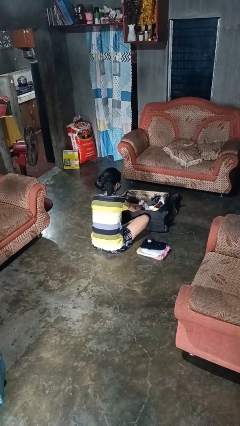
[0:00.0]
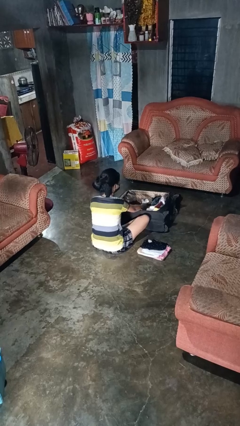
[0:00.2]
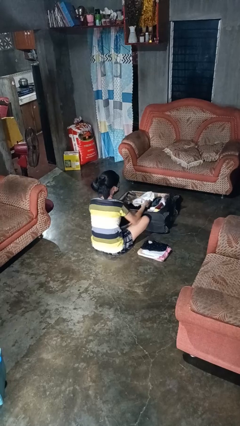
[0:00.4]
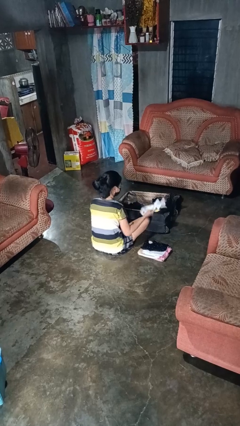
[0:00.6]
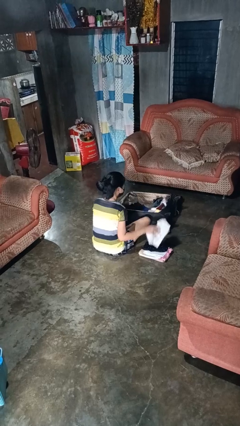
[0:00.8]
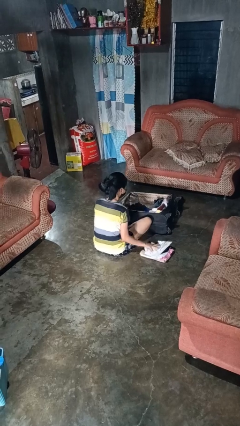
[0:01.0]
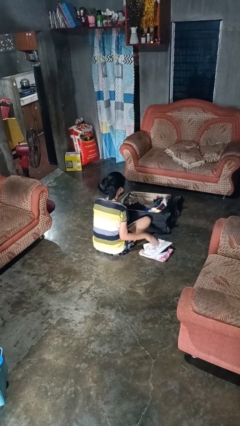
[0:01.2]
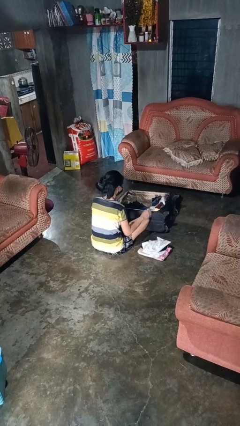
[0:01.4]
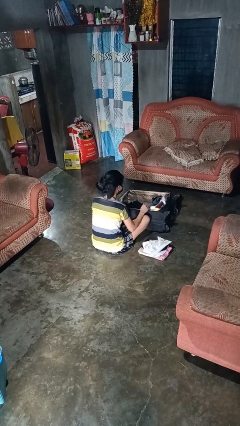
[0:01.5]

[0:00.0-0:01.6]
person unloads clothes from suitcase

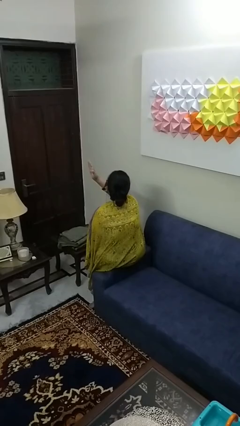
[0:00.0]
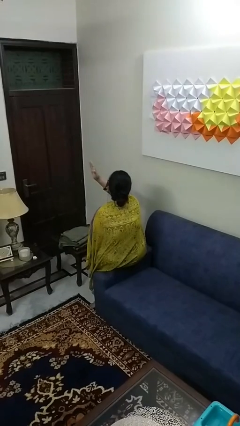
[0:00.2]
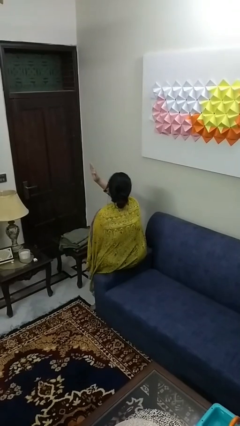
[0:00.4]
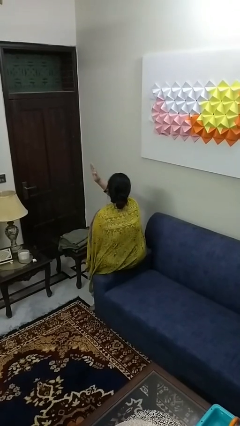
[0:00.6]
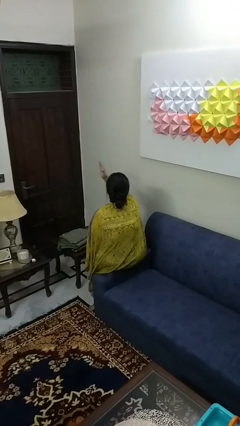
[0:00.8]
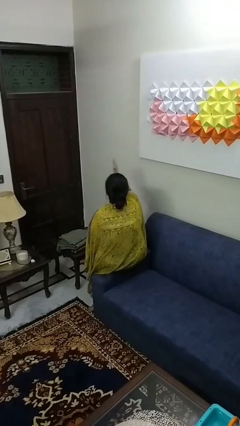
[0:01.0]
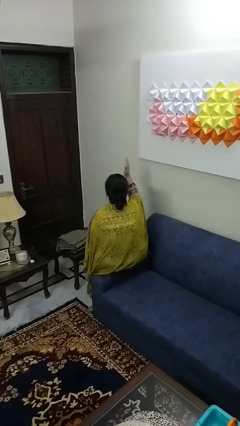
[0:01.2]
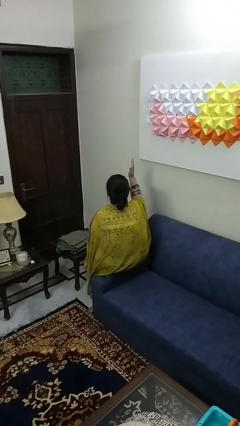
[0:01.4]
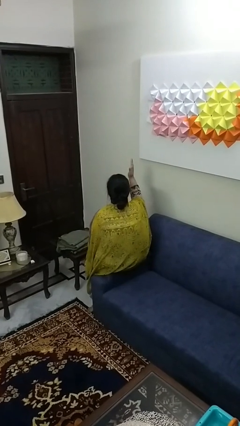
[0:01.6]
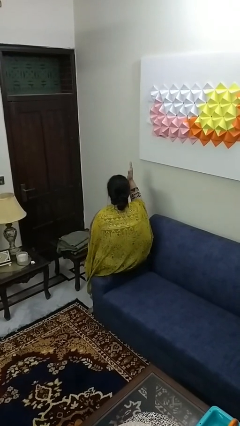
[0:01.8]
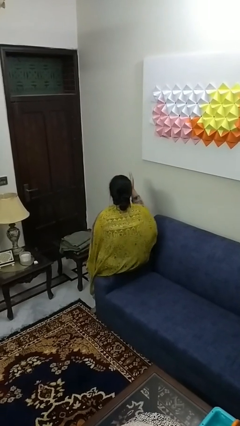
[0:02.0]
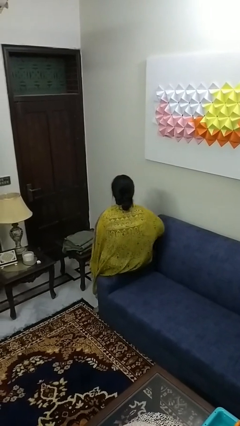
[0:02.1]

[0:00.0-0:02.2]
person gestures swipe right

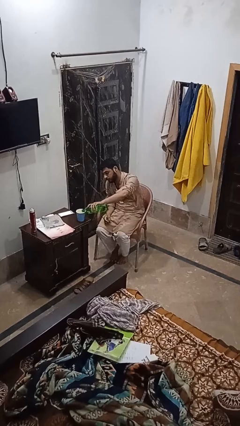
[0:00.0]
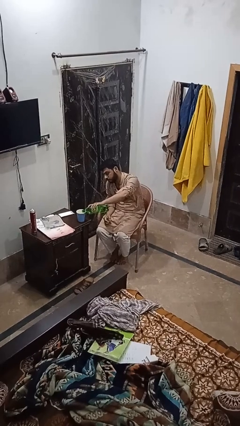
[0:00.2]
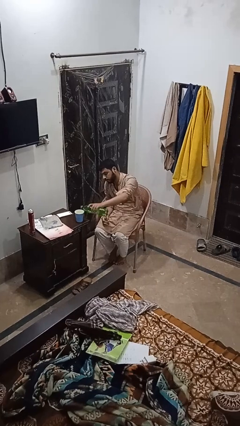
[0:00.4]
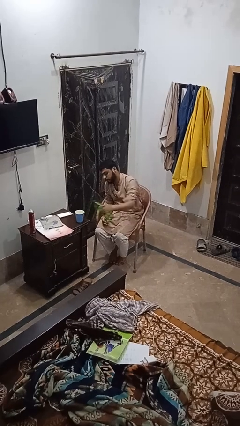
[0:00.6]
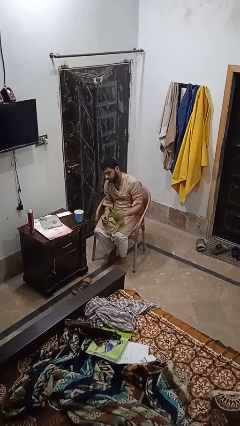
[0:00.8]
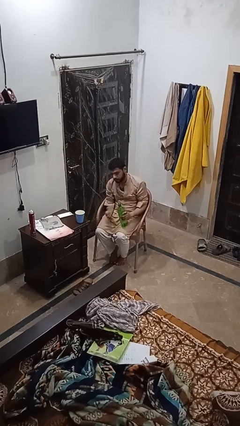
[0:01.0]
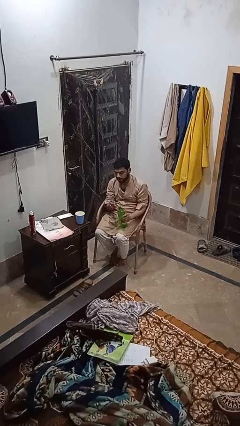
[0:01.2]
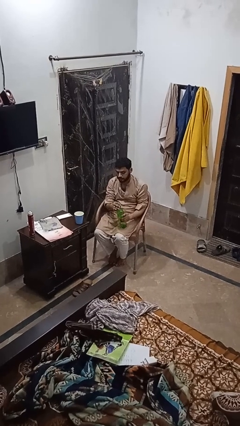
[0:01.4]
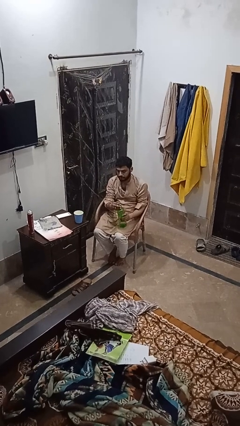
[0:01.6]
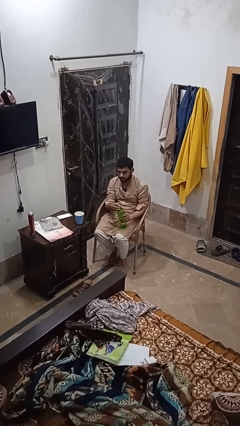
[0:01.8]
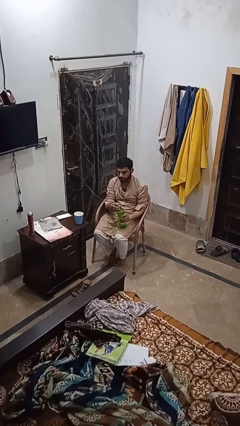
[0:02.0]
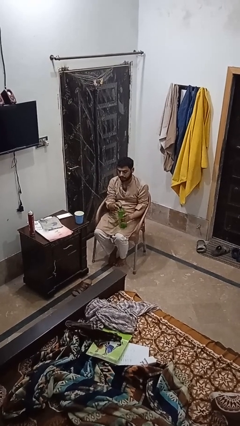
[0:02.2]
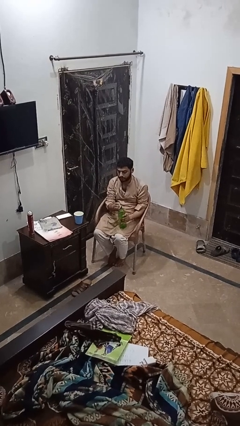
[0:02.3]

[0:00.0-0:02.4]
person screws lid to bottle

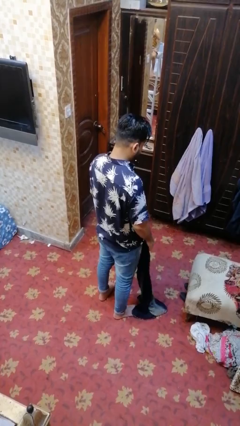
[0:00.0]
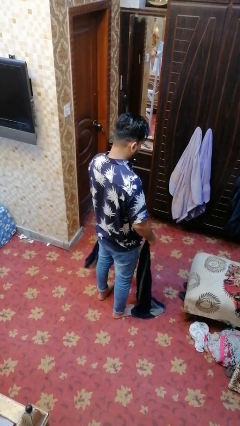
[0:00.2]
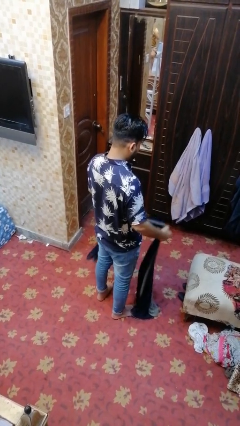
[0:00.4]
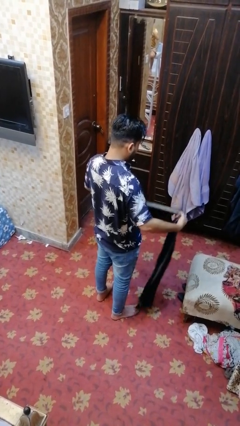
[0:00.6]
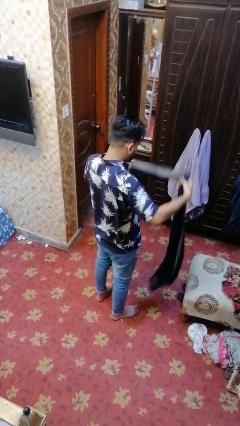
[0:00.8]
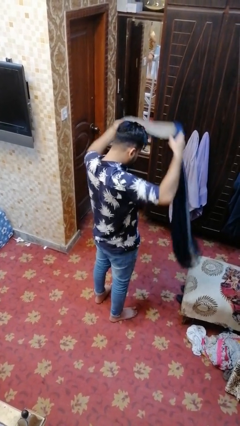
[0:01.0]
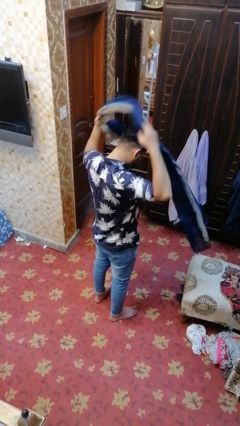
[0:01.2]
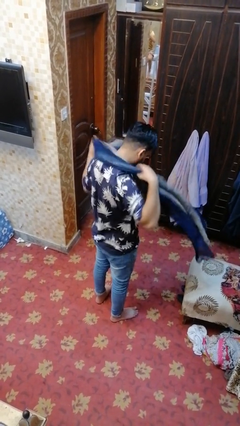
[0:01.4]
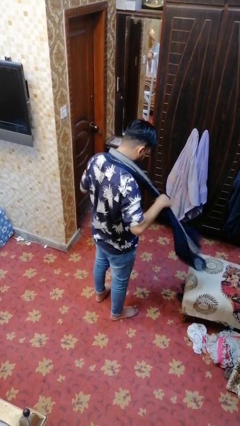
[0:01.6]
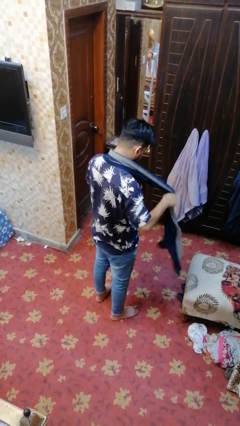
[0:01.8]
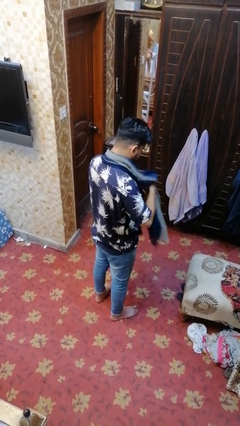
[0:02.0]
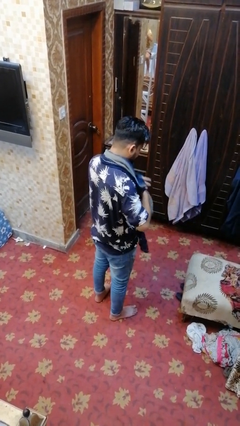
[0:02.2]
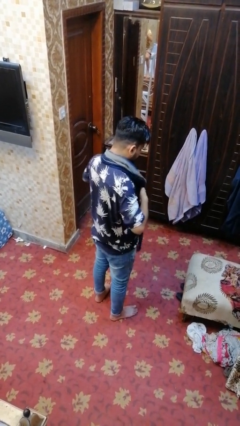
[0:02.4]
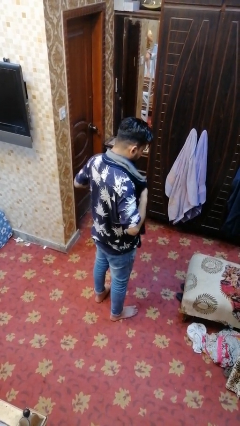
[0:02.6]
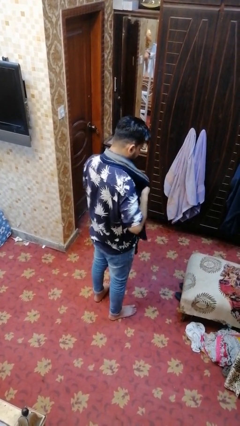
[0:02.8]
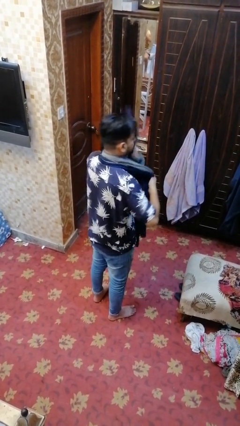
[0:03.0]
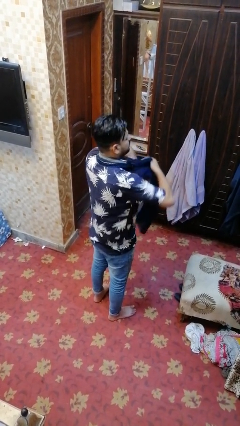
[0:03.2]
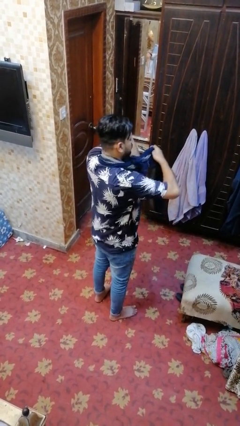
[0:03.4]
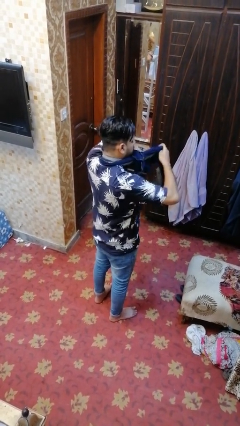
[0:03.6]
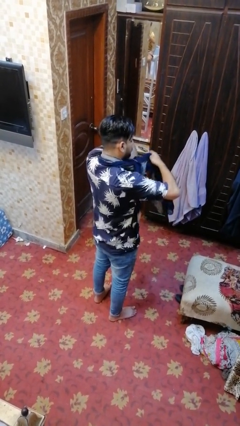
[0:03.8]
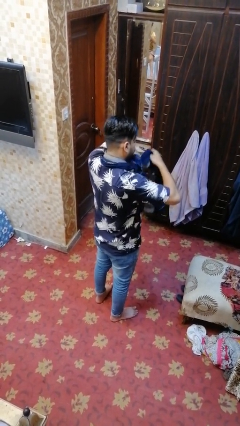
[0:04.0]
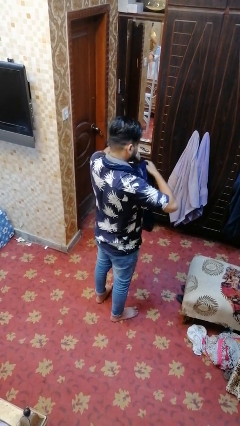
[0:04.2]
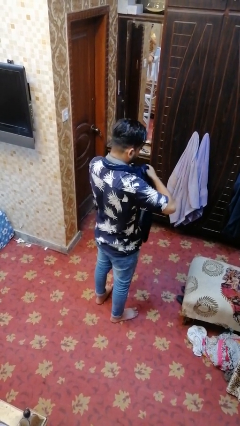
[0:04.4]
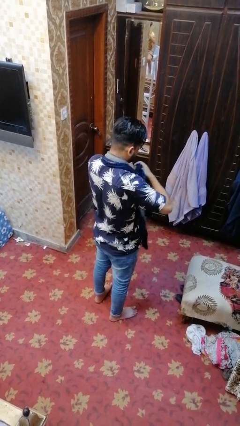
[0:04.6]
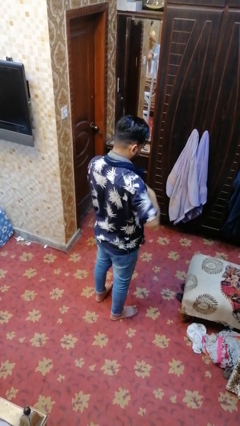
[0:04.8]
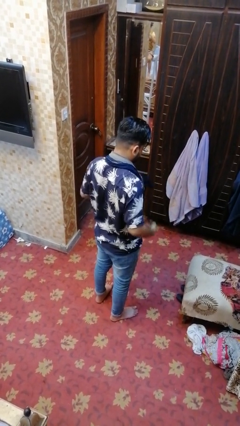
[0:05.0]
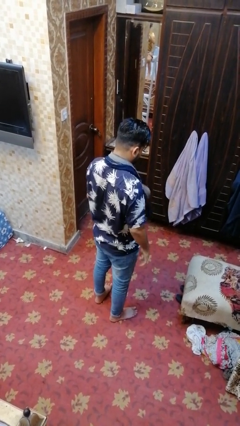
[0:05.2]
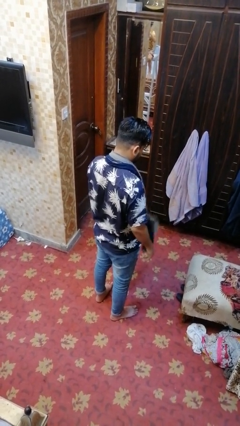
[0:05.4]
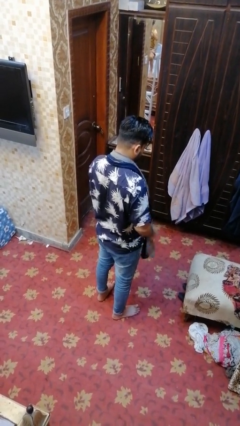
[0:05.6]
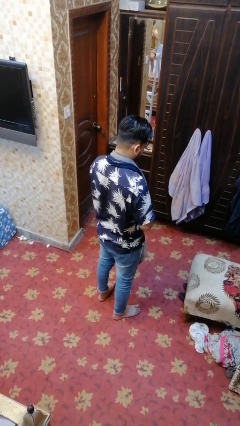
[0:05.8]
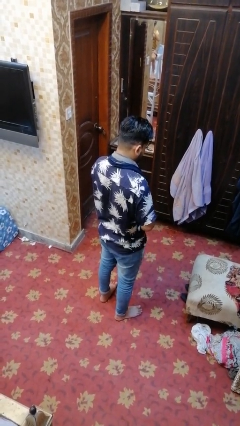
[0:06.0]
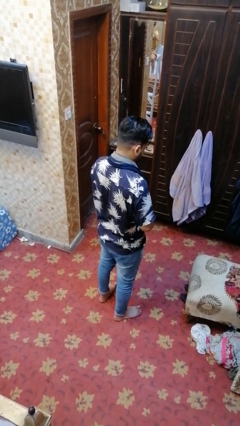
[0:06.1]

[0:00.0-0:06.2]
person puts on scarf

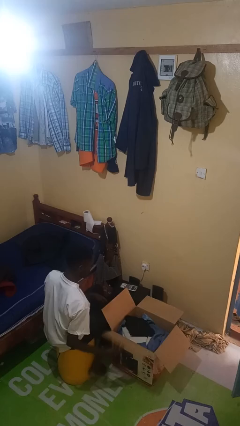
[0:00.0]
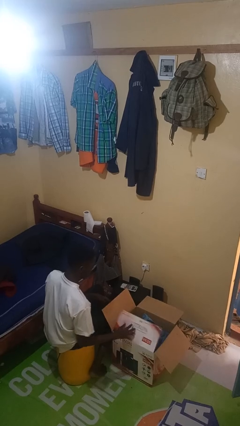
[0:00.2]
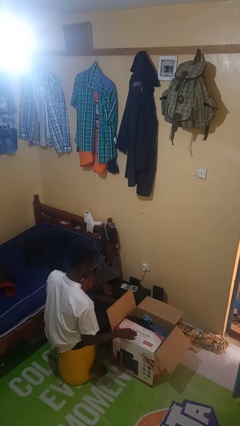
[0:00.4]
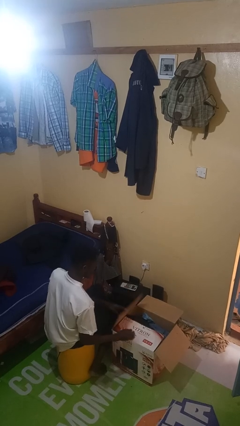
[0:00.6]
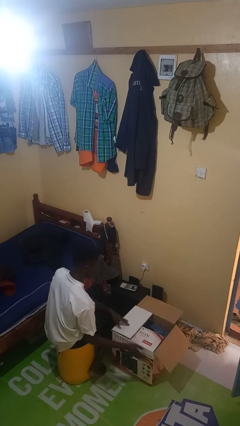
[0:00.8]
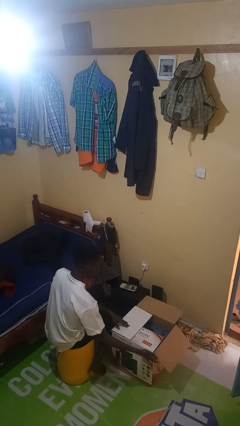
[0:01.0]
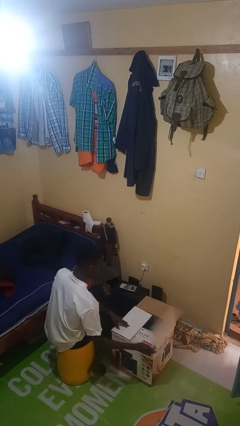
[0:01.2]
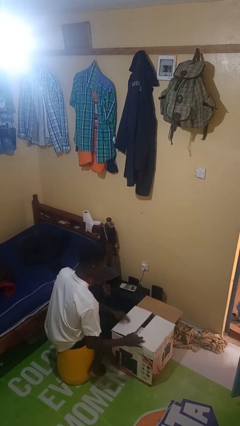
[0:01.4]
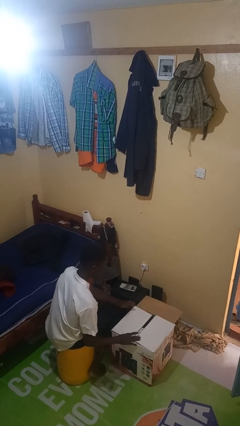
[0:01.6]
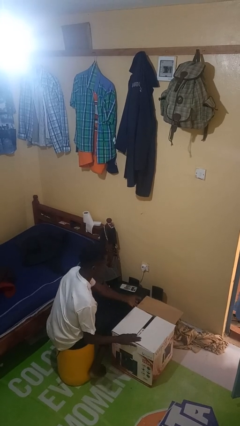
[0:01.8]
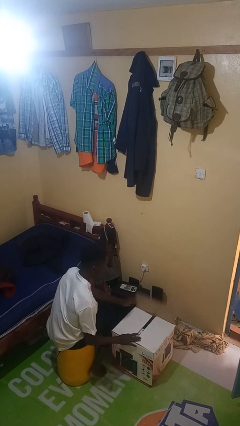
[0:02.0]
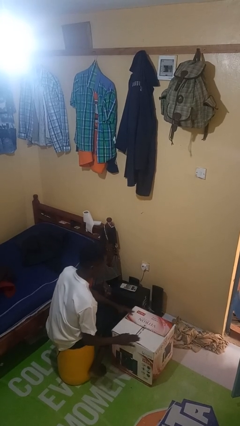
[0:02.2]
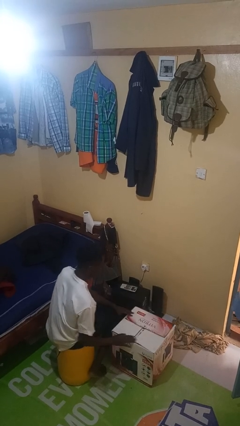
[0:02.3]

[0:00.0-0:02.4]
person closes box

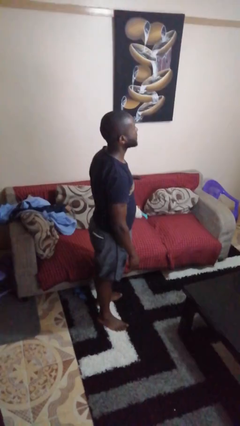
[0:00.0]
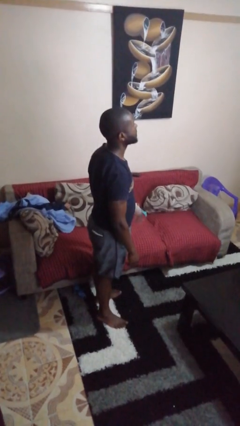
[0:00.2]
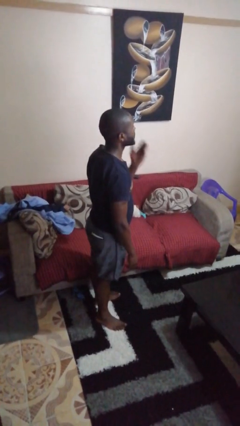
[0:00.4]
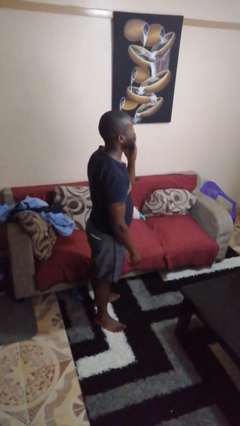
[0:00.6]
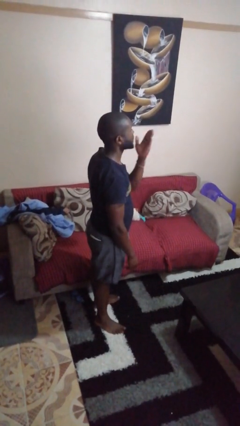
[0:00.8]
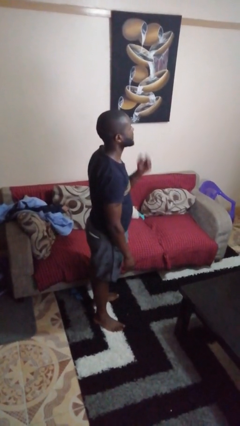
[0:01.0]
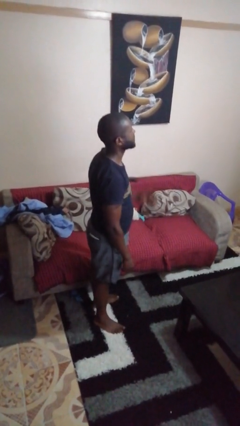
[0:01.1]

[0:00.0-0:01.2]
person gestures blow kiss

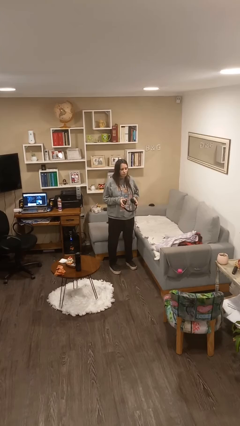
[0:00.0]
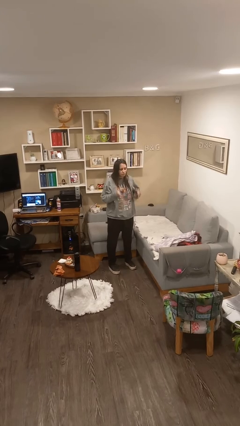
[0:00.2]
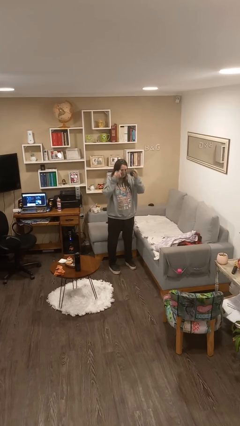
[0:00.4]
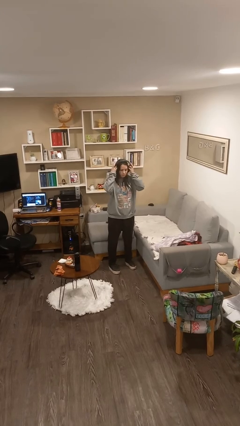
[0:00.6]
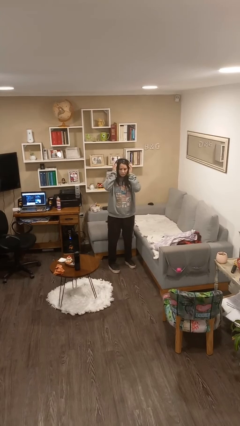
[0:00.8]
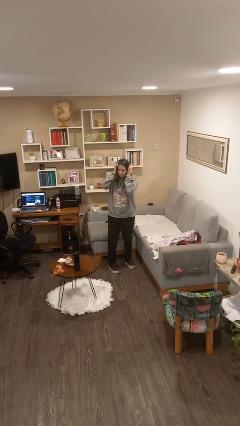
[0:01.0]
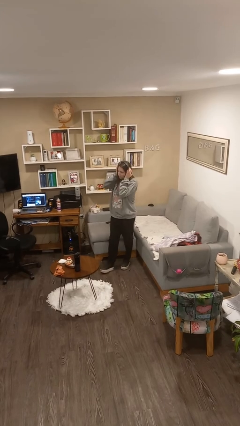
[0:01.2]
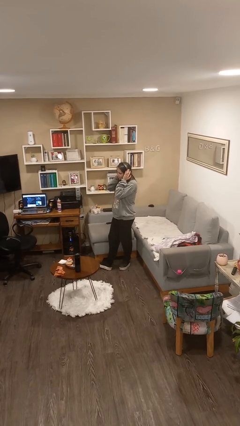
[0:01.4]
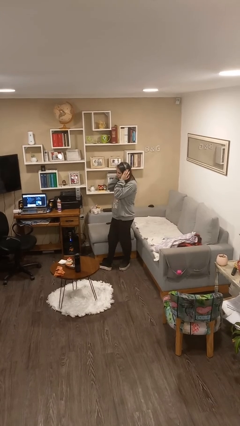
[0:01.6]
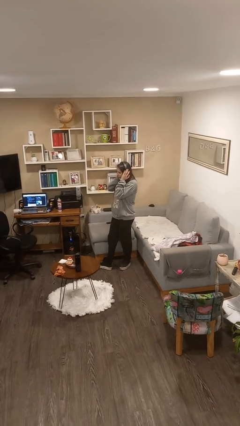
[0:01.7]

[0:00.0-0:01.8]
person puts on headphones
